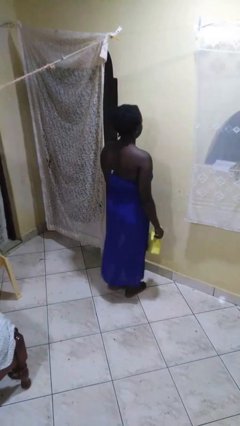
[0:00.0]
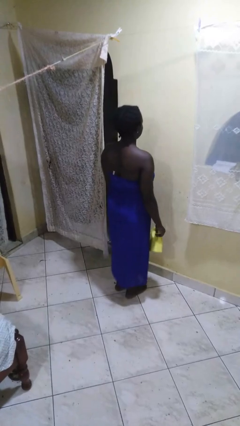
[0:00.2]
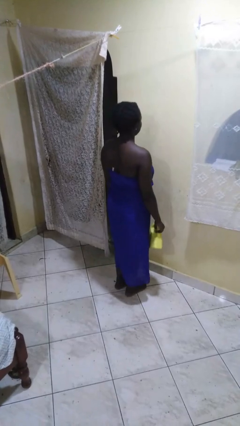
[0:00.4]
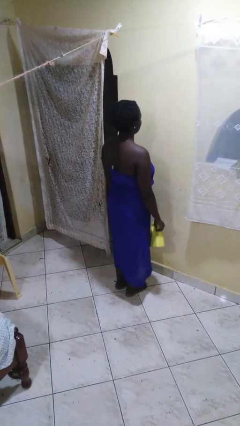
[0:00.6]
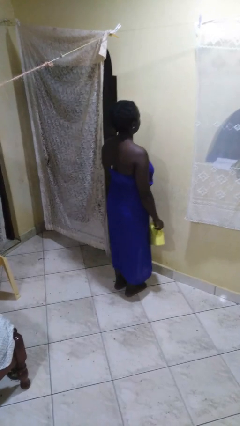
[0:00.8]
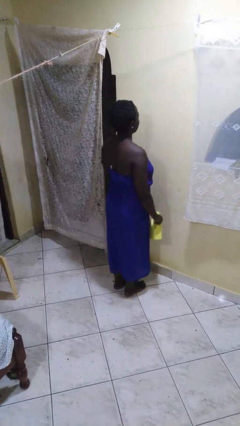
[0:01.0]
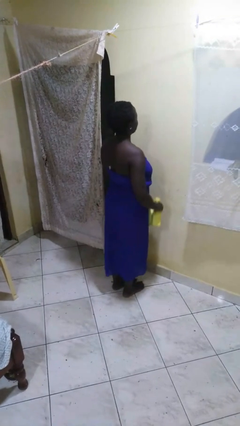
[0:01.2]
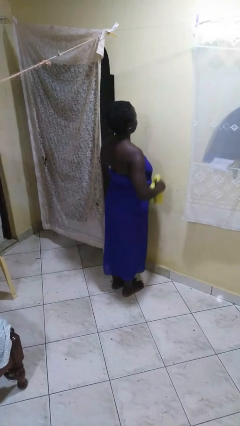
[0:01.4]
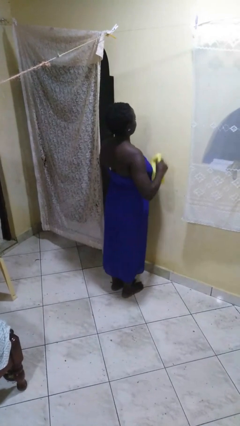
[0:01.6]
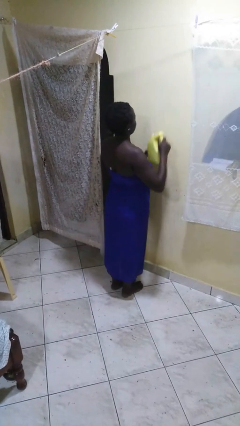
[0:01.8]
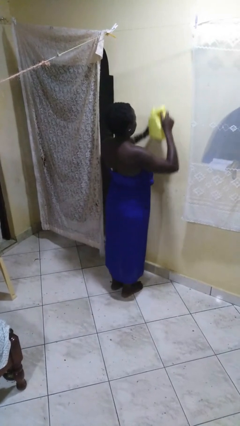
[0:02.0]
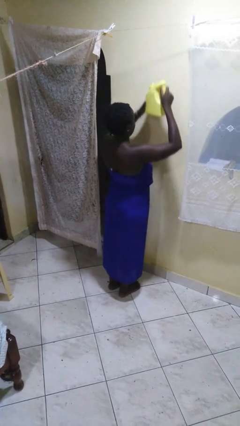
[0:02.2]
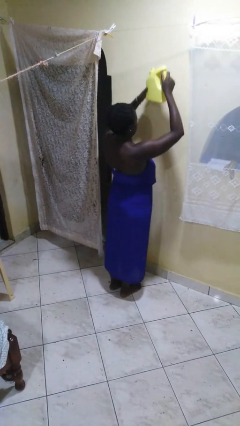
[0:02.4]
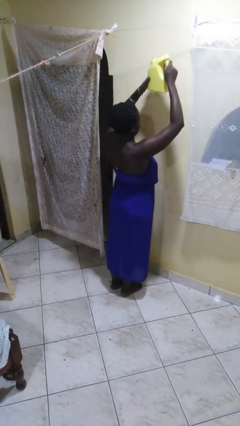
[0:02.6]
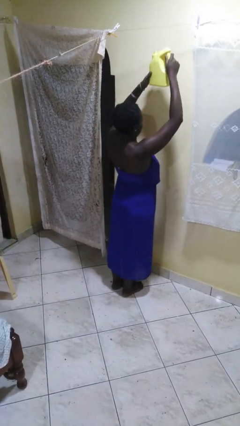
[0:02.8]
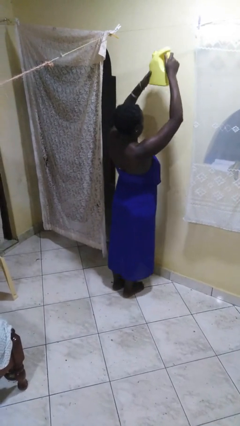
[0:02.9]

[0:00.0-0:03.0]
person holds object above head

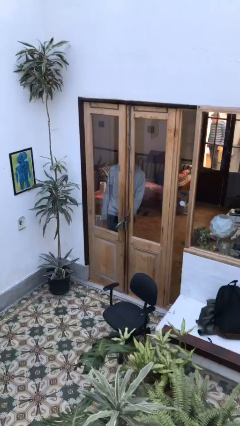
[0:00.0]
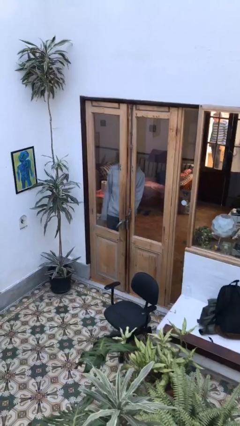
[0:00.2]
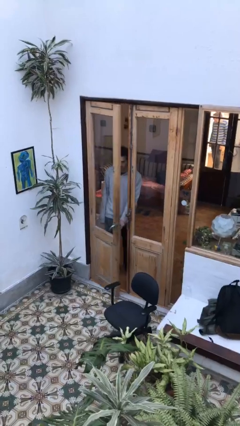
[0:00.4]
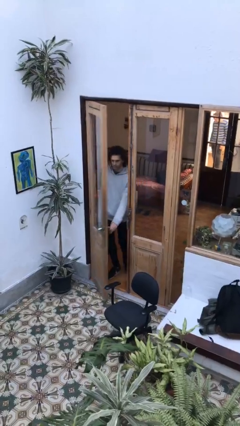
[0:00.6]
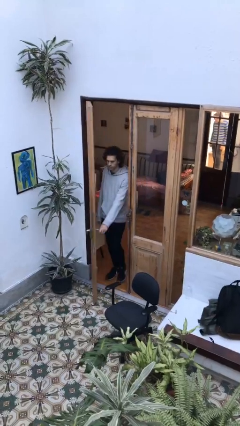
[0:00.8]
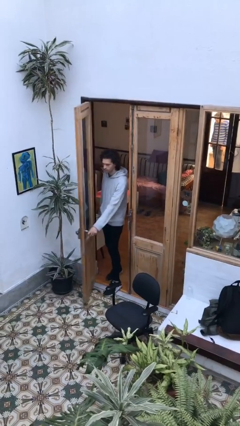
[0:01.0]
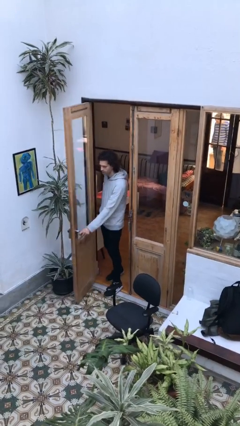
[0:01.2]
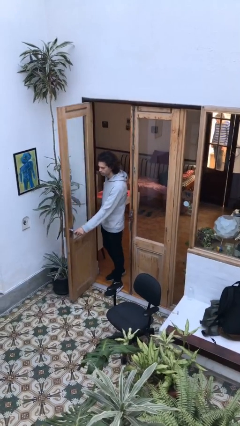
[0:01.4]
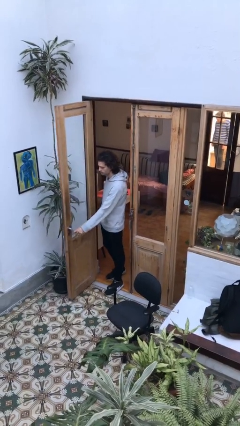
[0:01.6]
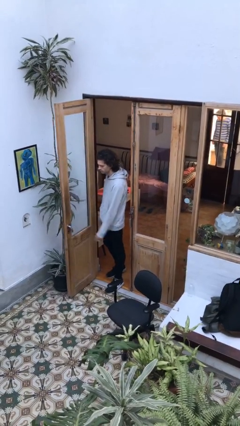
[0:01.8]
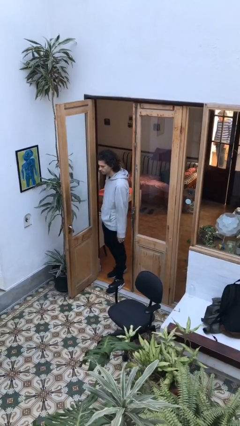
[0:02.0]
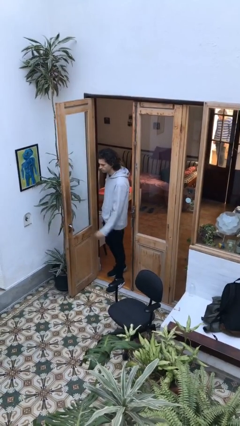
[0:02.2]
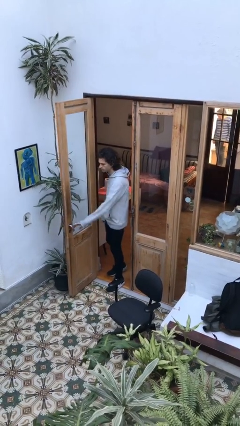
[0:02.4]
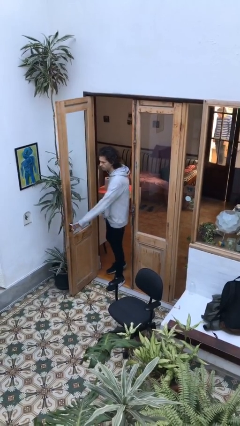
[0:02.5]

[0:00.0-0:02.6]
person opens facility door

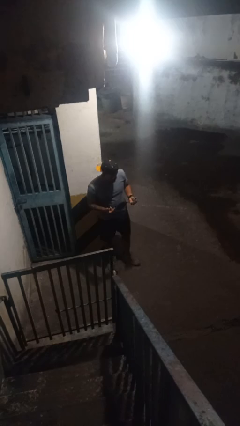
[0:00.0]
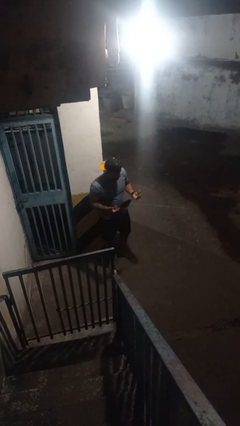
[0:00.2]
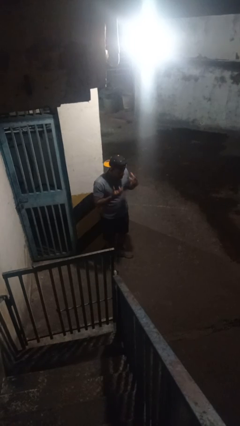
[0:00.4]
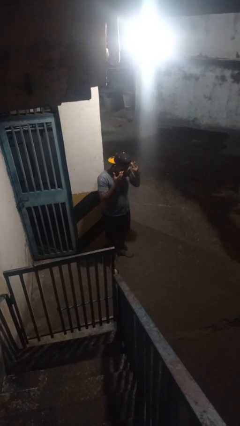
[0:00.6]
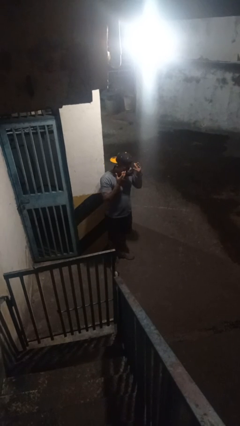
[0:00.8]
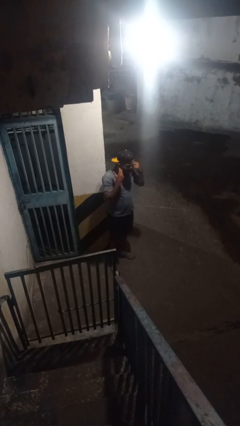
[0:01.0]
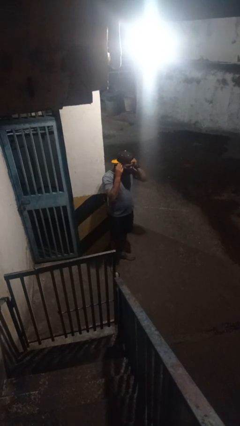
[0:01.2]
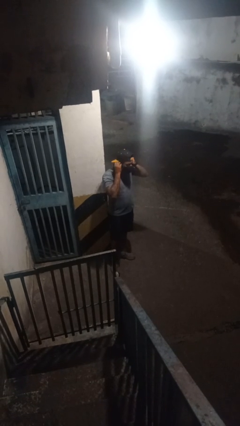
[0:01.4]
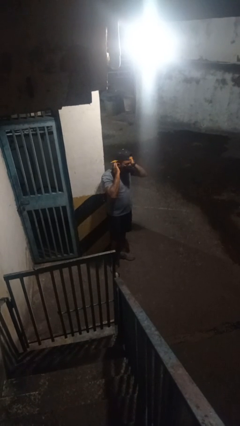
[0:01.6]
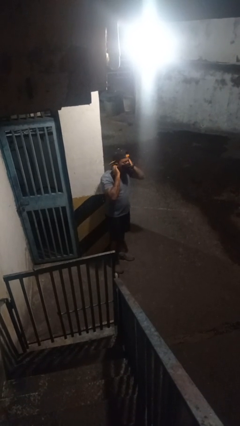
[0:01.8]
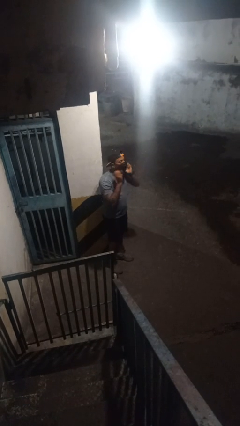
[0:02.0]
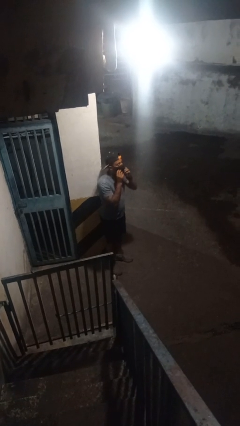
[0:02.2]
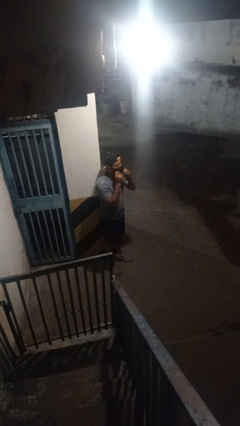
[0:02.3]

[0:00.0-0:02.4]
person puts on facemask

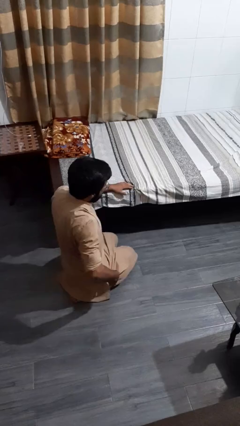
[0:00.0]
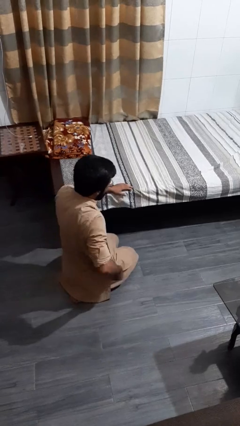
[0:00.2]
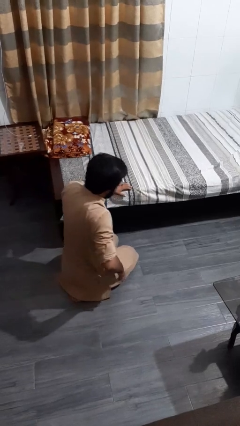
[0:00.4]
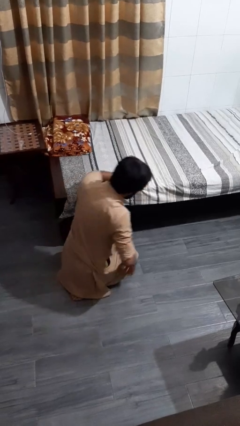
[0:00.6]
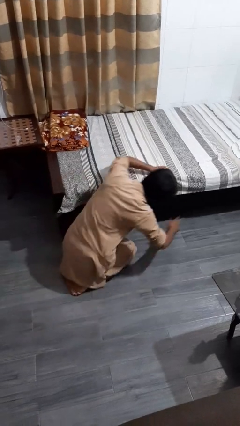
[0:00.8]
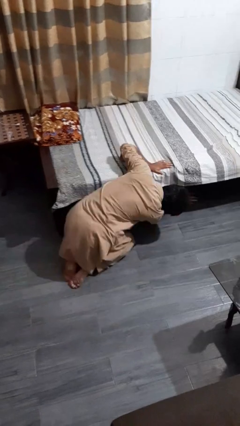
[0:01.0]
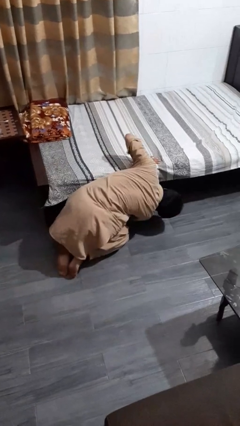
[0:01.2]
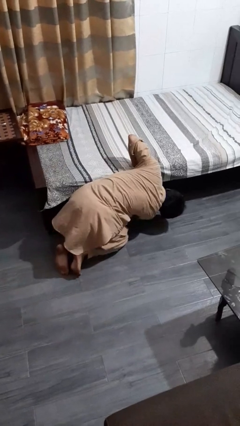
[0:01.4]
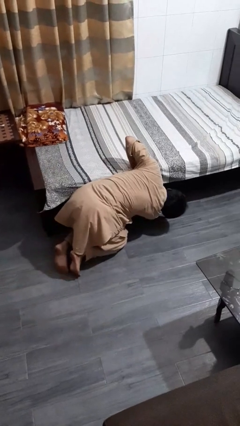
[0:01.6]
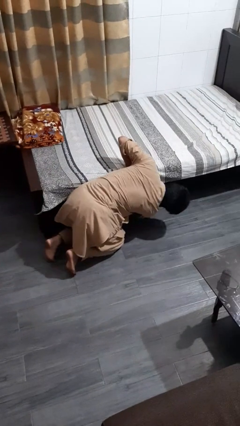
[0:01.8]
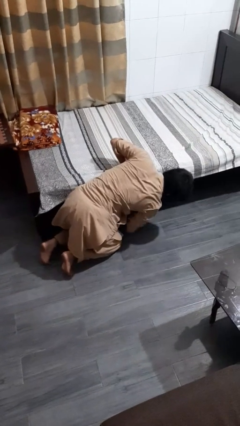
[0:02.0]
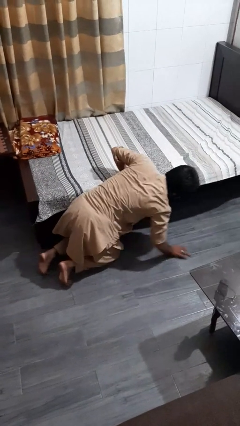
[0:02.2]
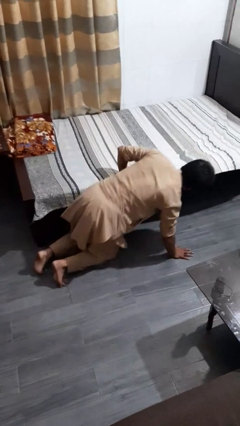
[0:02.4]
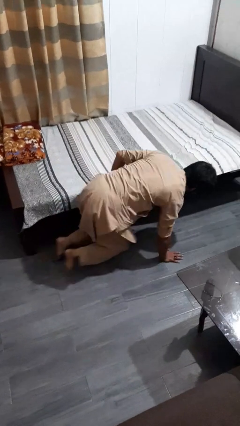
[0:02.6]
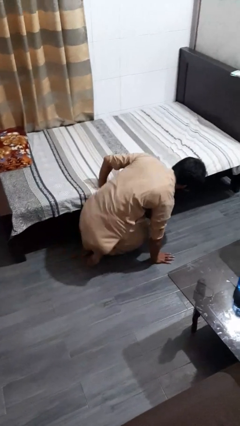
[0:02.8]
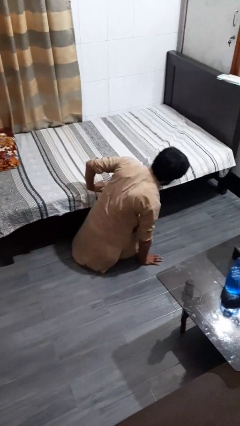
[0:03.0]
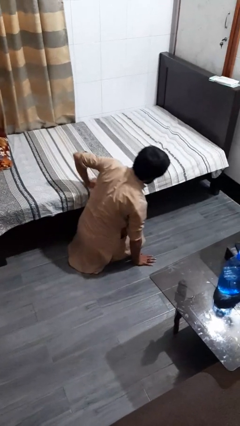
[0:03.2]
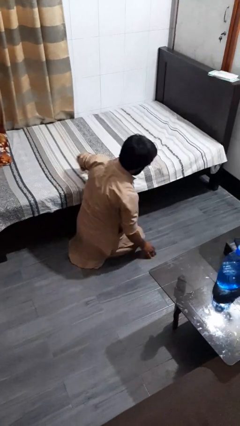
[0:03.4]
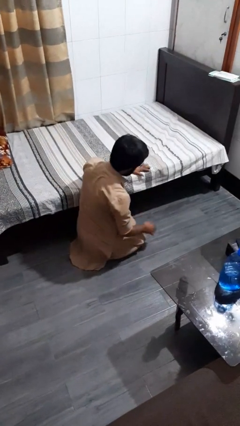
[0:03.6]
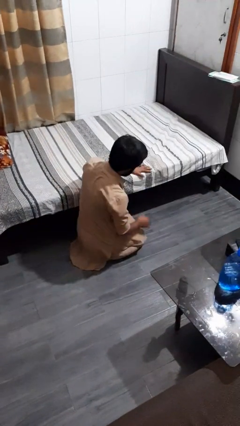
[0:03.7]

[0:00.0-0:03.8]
person searches under bed

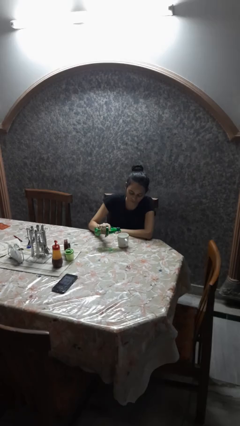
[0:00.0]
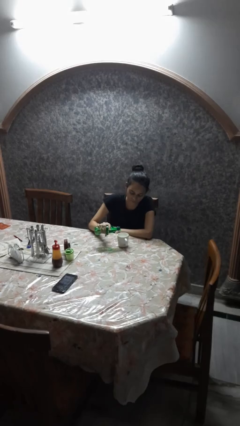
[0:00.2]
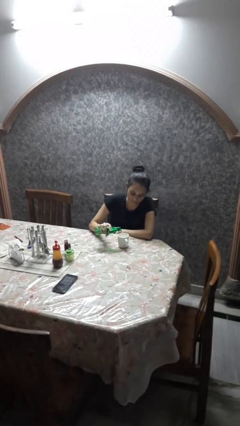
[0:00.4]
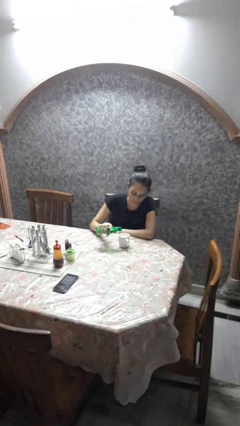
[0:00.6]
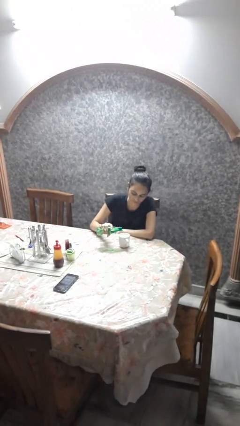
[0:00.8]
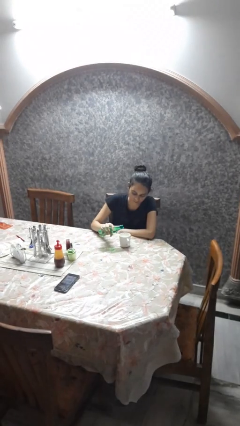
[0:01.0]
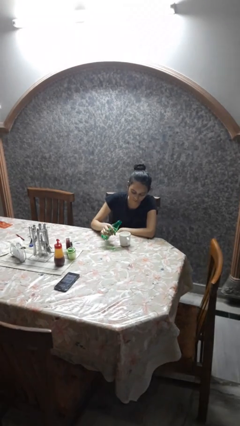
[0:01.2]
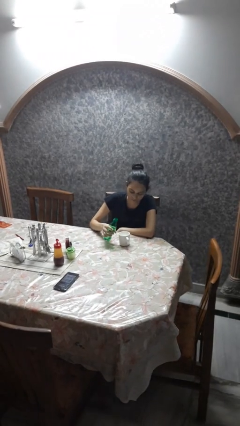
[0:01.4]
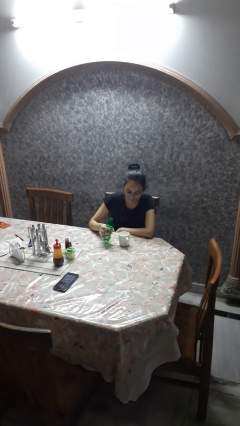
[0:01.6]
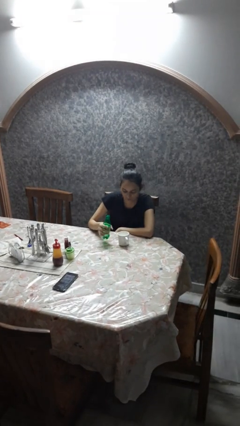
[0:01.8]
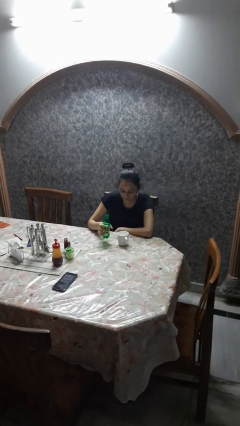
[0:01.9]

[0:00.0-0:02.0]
person pours liquid into cup

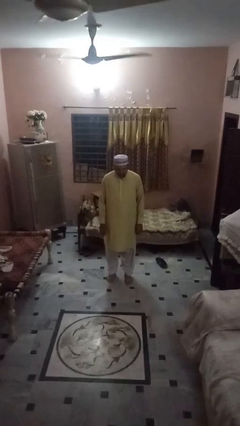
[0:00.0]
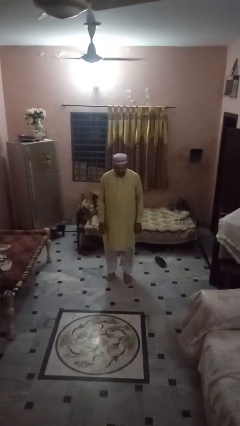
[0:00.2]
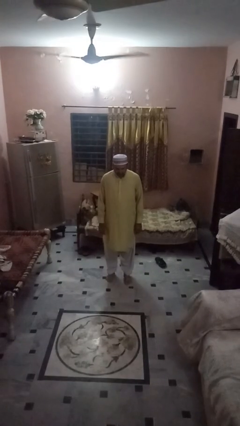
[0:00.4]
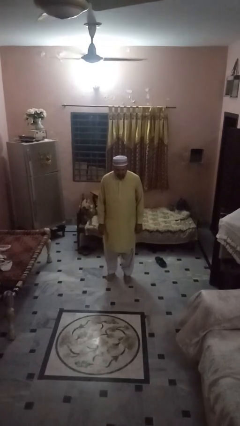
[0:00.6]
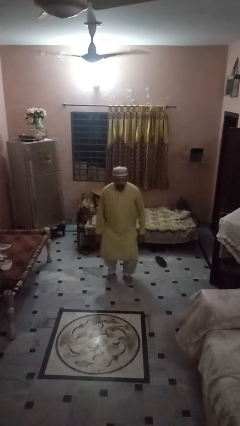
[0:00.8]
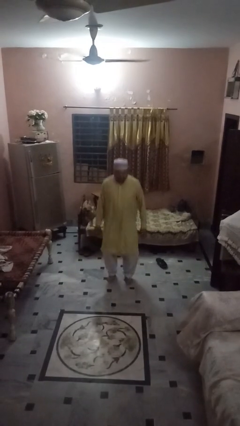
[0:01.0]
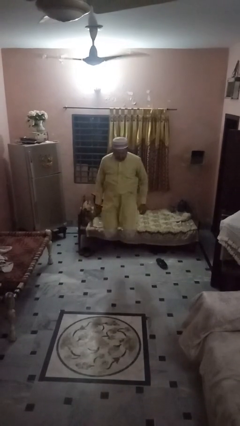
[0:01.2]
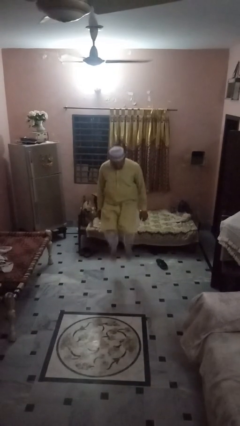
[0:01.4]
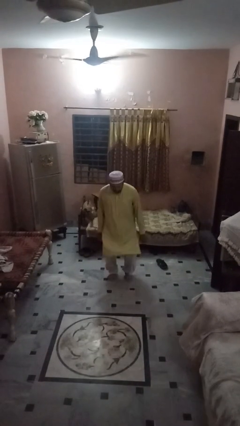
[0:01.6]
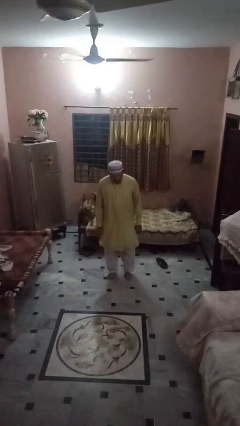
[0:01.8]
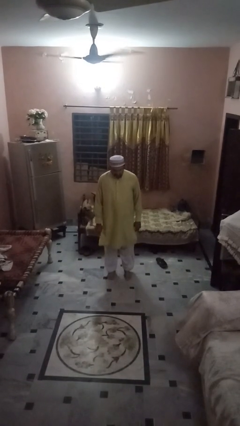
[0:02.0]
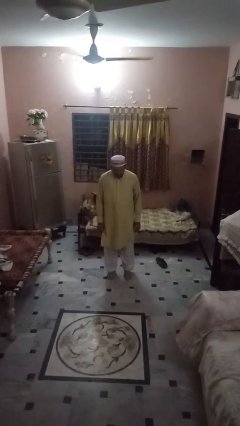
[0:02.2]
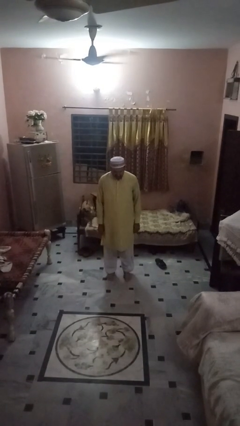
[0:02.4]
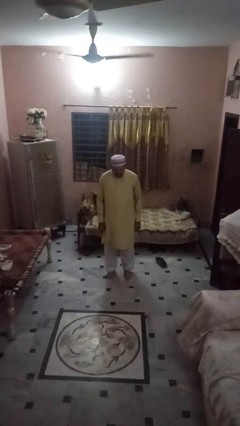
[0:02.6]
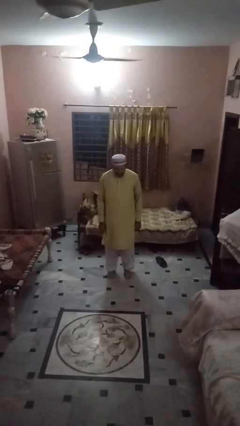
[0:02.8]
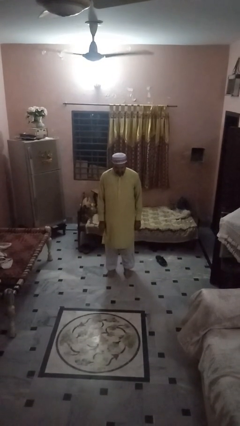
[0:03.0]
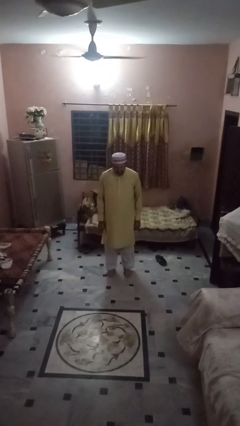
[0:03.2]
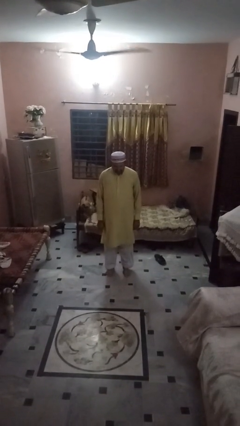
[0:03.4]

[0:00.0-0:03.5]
person jumps
